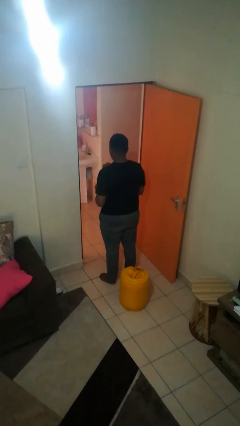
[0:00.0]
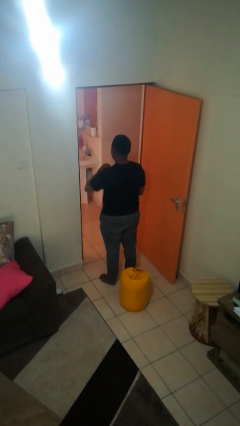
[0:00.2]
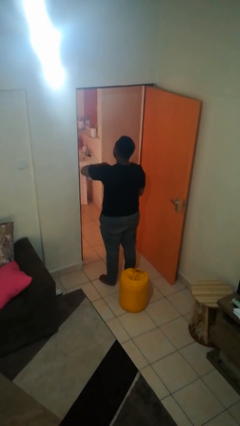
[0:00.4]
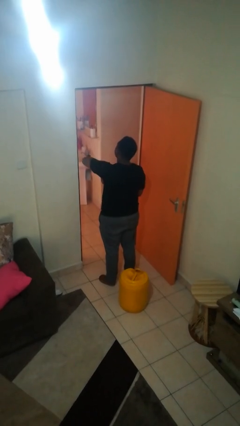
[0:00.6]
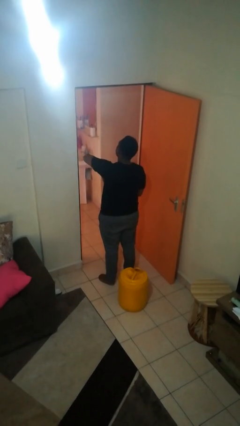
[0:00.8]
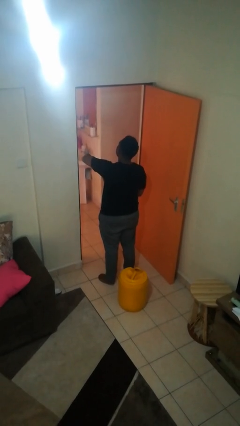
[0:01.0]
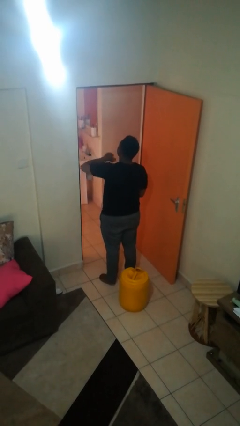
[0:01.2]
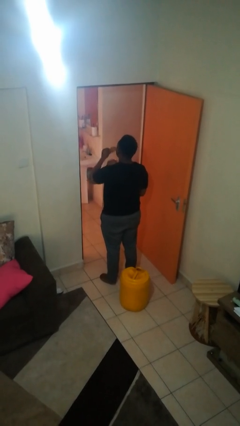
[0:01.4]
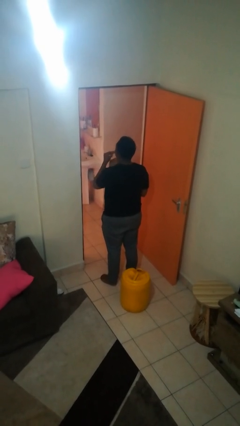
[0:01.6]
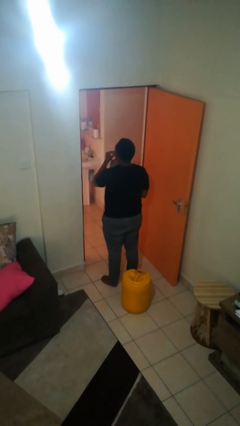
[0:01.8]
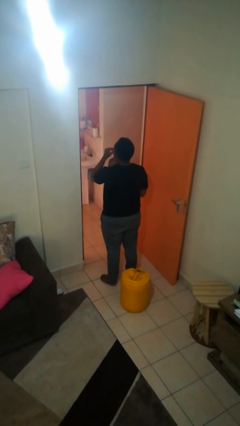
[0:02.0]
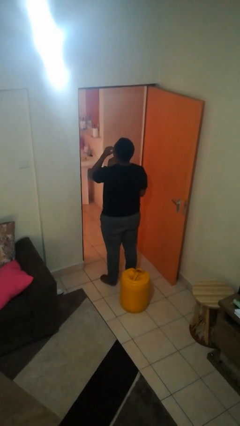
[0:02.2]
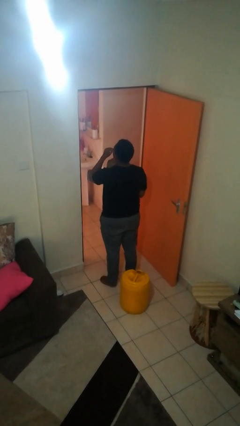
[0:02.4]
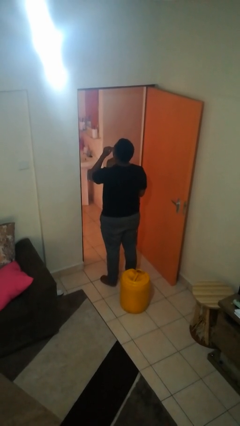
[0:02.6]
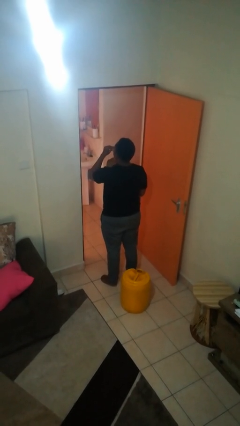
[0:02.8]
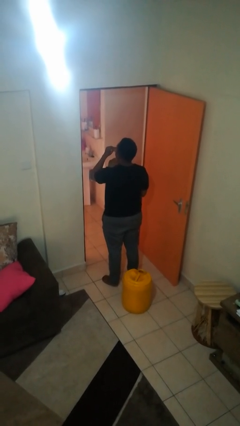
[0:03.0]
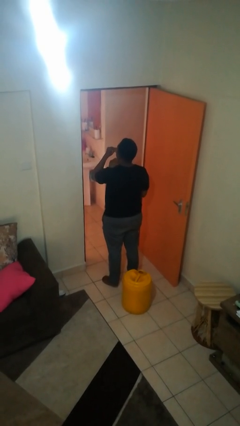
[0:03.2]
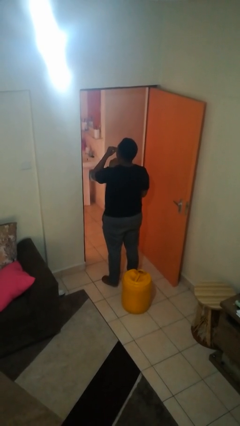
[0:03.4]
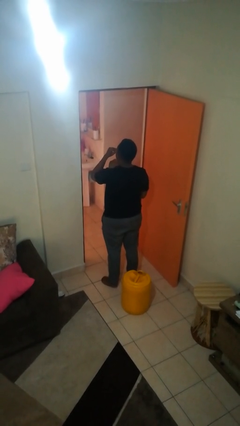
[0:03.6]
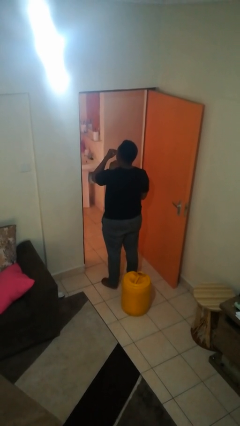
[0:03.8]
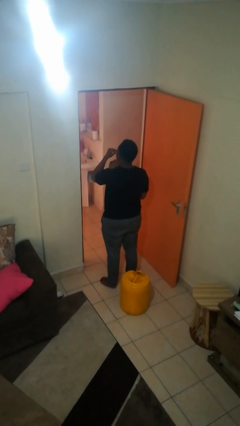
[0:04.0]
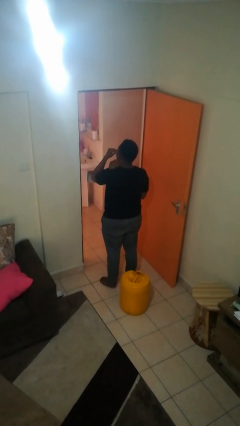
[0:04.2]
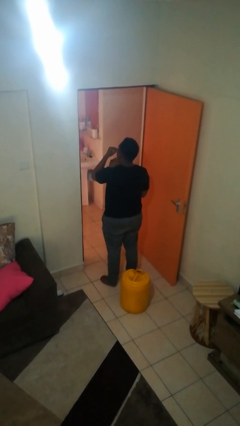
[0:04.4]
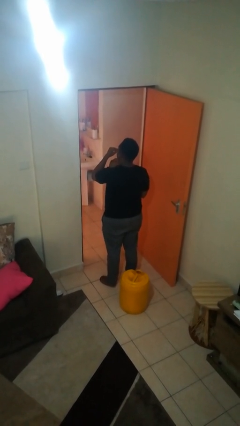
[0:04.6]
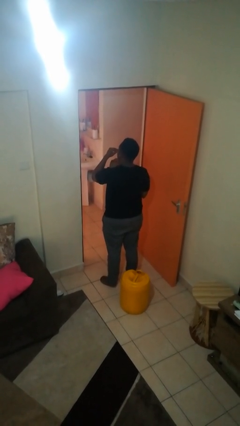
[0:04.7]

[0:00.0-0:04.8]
person eats snack from bag

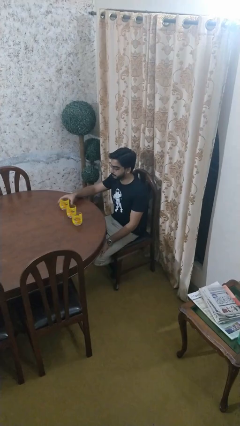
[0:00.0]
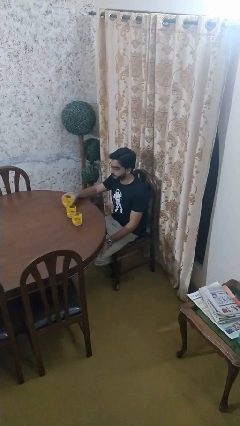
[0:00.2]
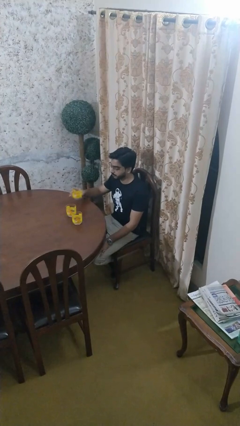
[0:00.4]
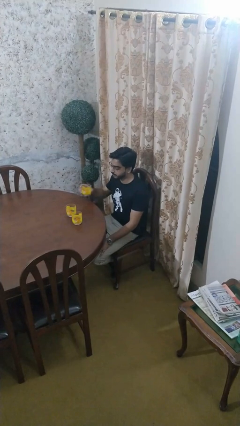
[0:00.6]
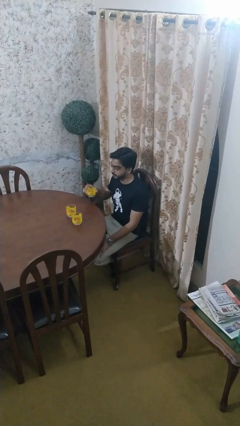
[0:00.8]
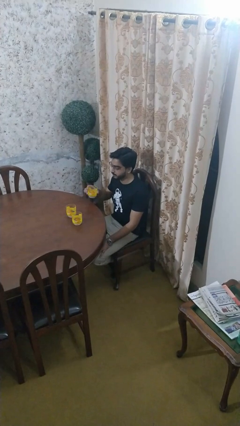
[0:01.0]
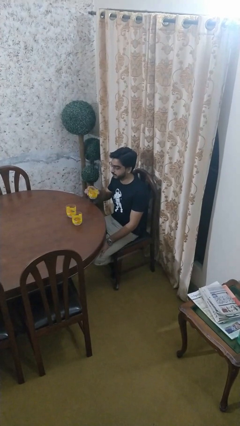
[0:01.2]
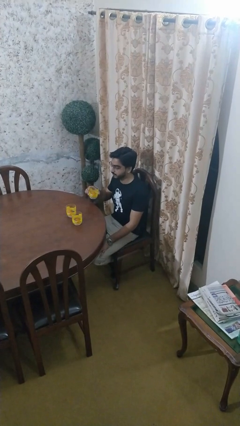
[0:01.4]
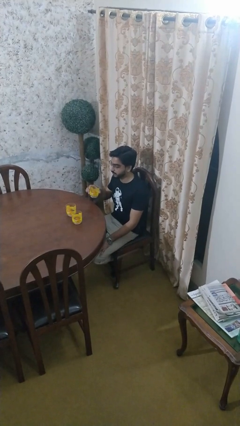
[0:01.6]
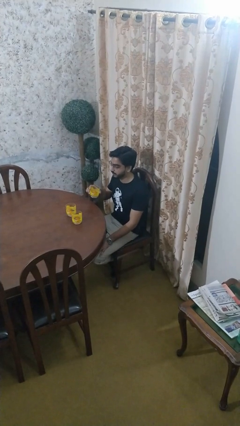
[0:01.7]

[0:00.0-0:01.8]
person picks up object from table

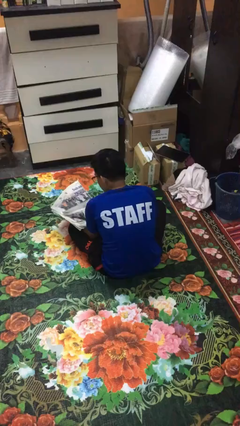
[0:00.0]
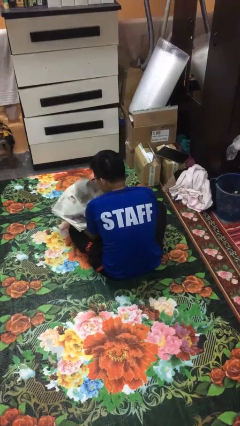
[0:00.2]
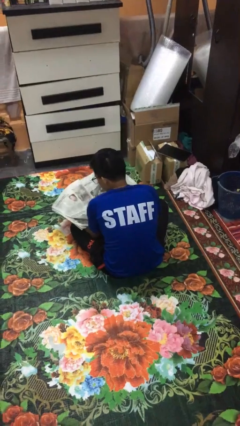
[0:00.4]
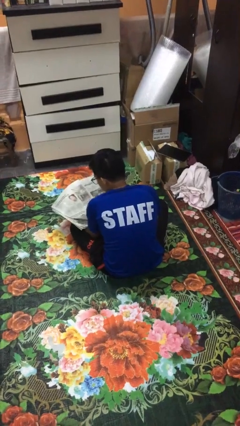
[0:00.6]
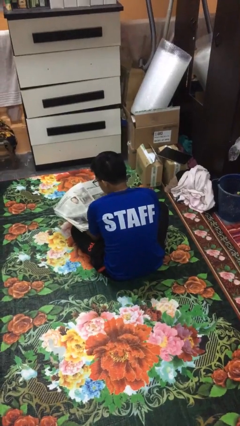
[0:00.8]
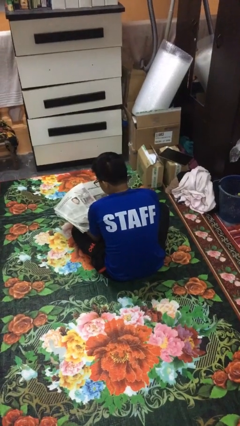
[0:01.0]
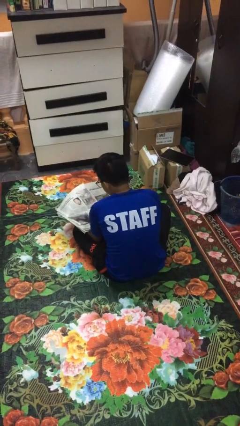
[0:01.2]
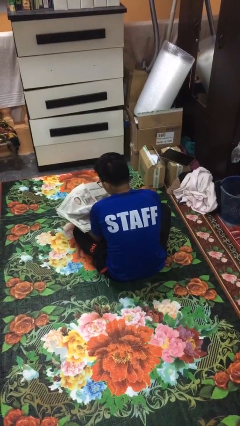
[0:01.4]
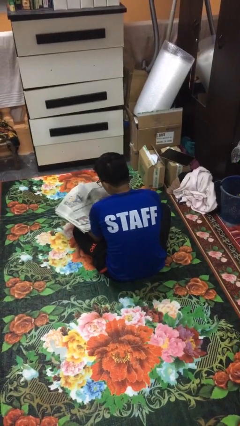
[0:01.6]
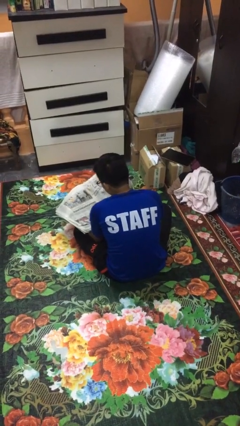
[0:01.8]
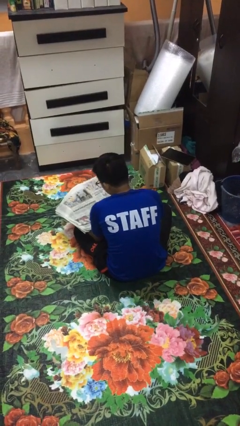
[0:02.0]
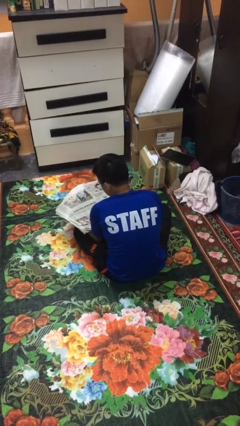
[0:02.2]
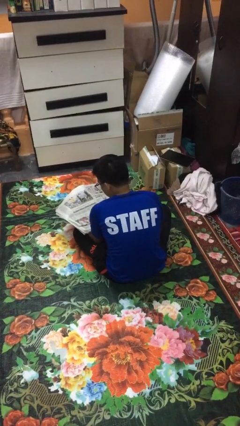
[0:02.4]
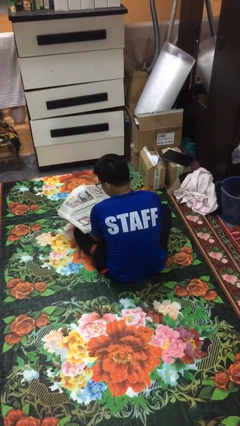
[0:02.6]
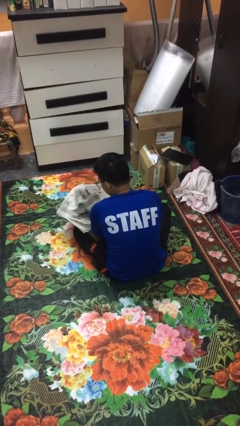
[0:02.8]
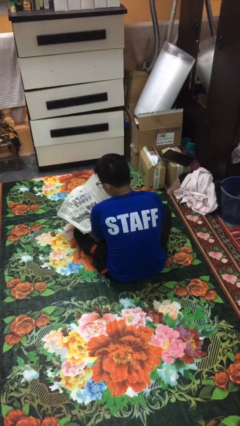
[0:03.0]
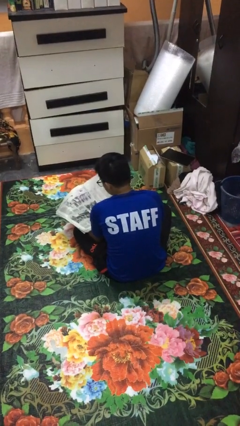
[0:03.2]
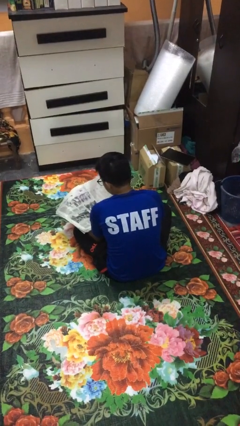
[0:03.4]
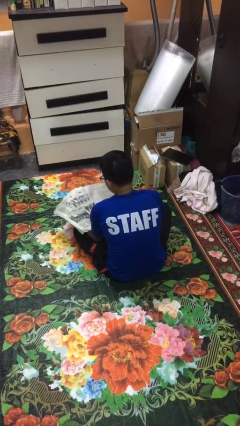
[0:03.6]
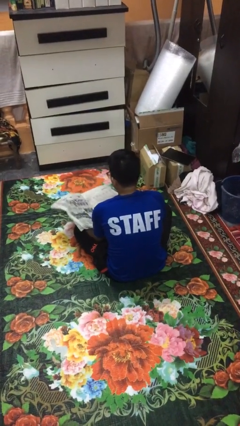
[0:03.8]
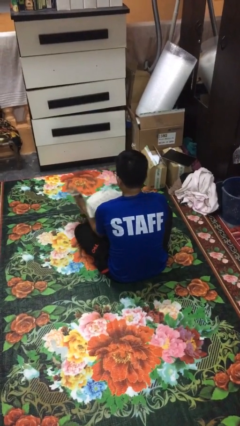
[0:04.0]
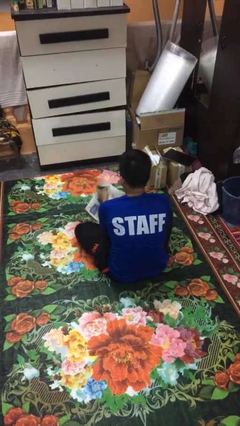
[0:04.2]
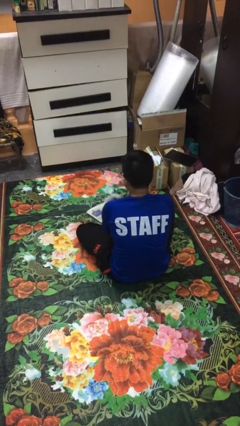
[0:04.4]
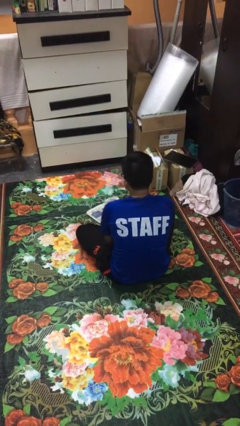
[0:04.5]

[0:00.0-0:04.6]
person reads newspaper

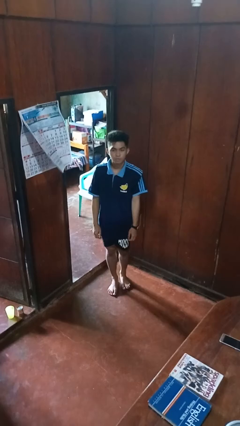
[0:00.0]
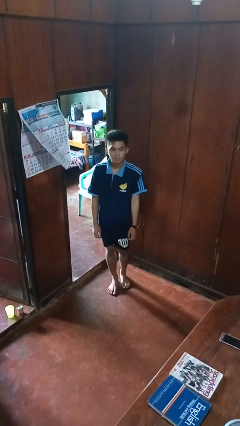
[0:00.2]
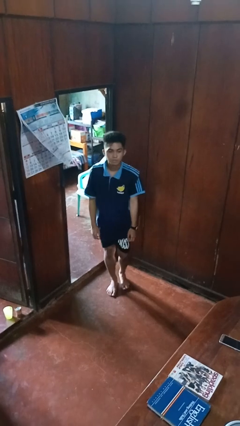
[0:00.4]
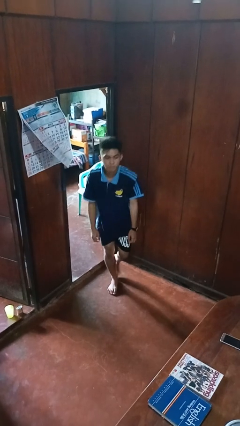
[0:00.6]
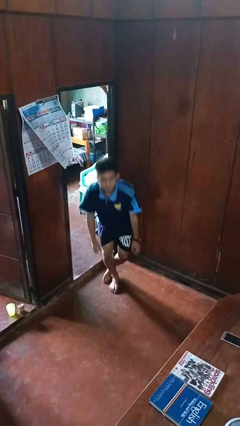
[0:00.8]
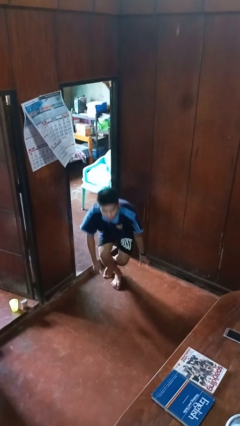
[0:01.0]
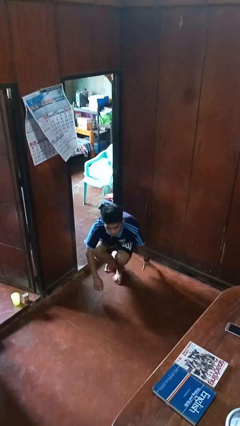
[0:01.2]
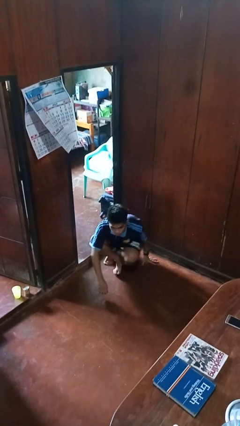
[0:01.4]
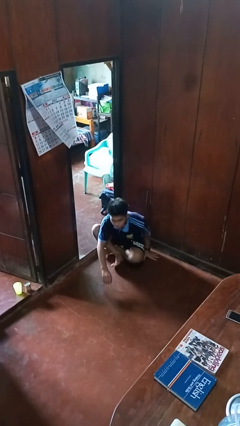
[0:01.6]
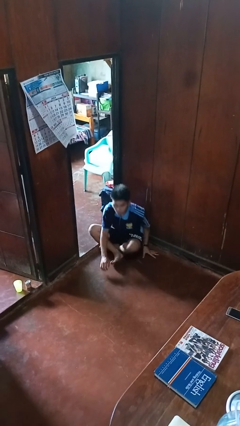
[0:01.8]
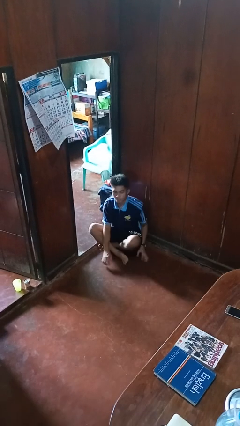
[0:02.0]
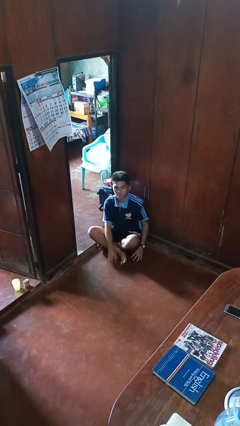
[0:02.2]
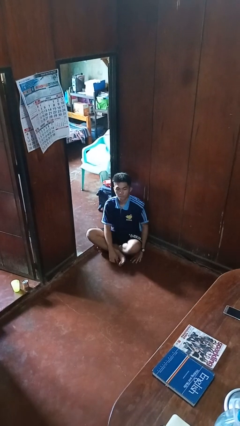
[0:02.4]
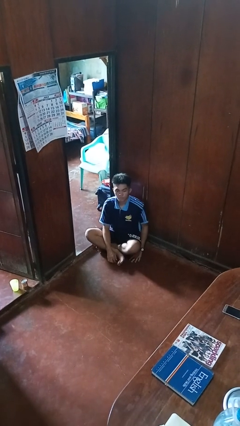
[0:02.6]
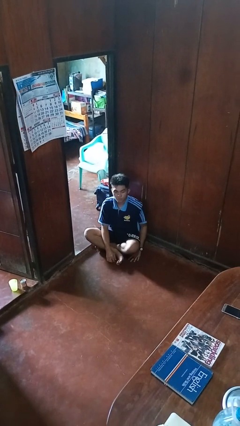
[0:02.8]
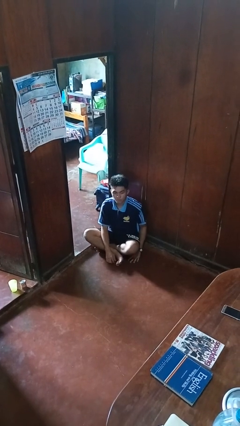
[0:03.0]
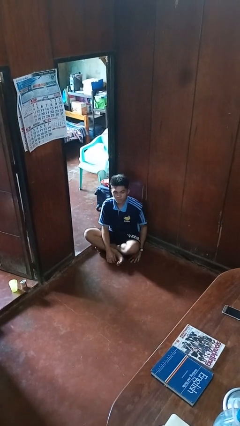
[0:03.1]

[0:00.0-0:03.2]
person sits crisscross

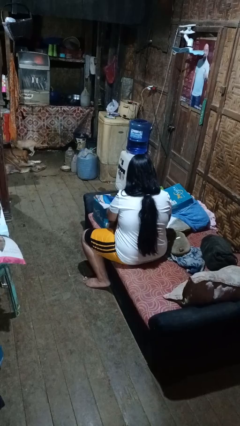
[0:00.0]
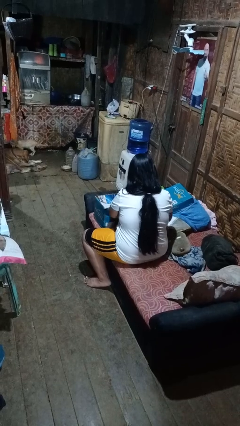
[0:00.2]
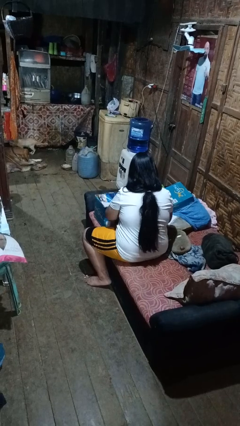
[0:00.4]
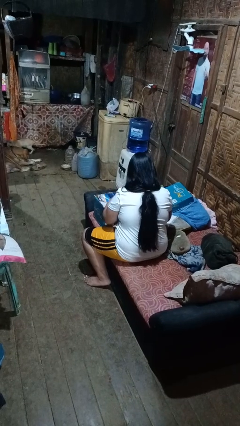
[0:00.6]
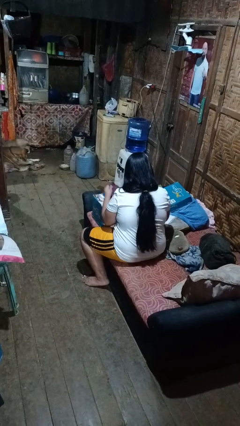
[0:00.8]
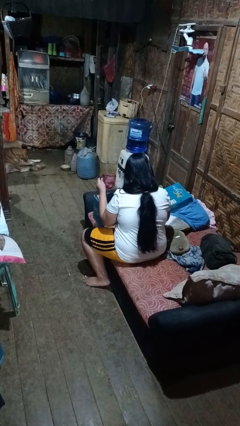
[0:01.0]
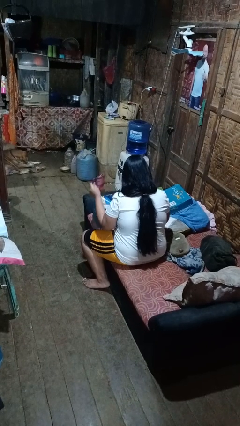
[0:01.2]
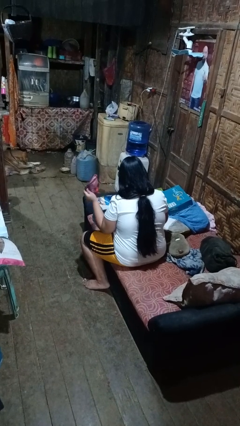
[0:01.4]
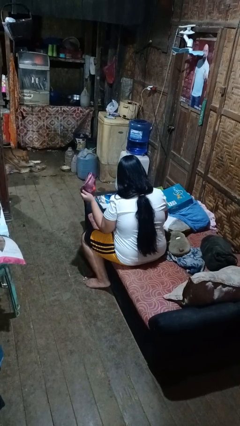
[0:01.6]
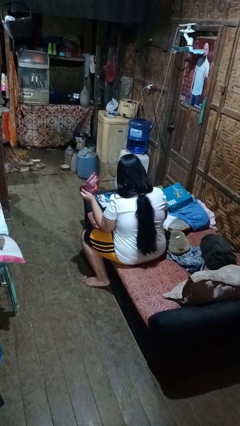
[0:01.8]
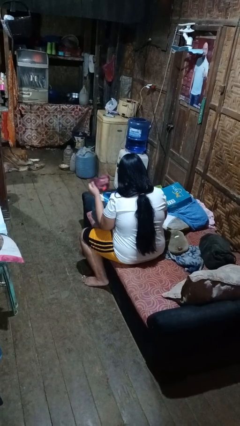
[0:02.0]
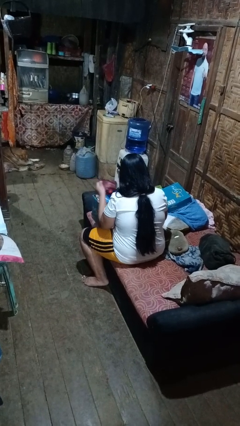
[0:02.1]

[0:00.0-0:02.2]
person searches in box

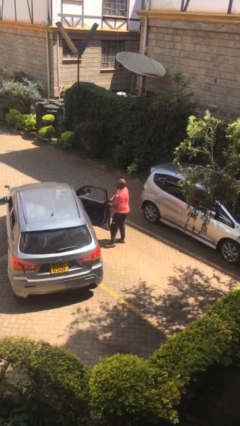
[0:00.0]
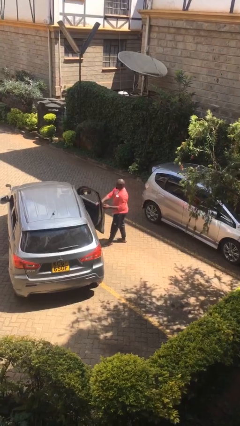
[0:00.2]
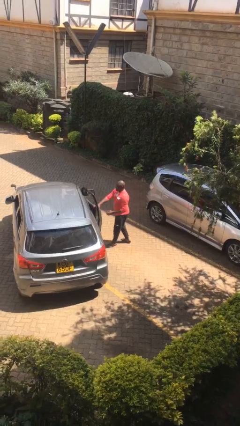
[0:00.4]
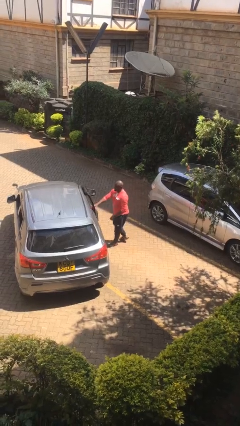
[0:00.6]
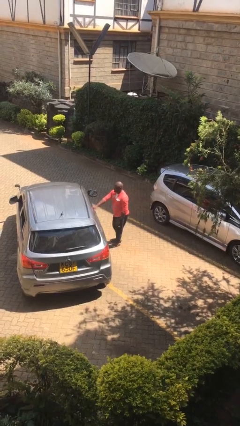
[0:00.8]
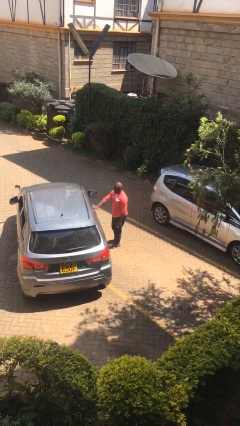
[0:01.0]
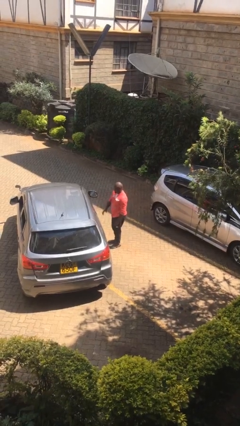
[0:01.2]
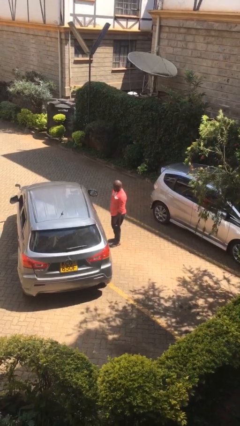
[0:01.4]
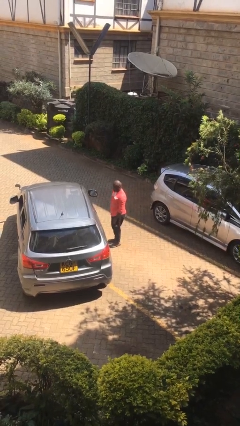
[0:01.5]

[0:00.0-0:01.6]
person closes car door
